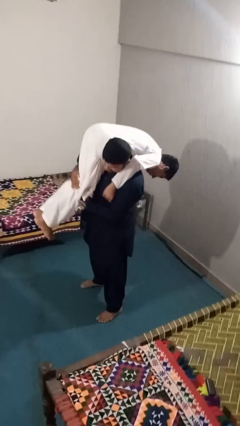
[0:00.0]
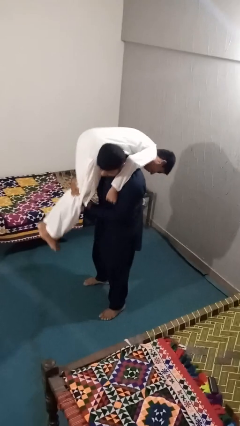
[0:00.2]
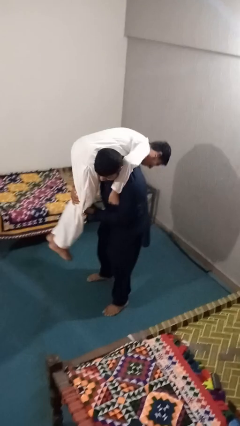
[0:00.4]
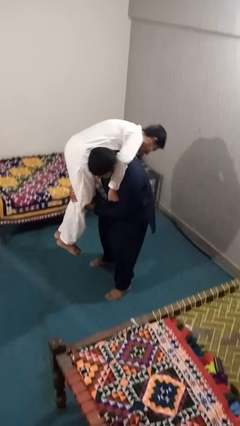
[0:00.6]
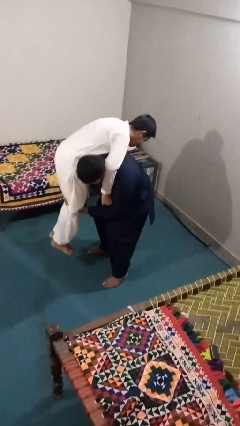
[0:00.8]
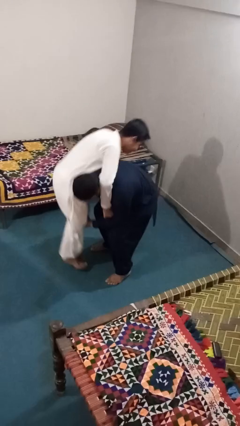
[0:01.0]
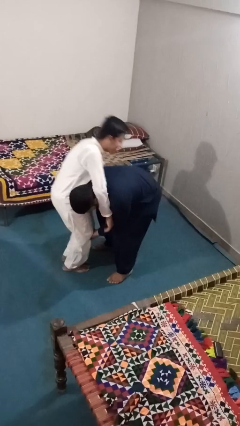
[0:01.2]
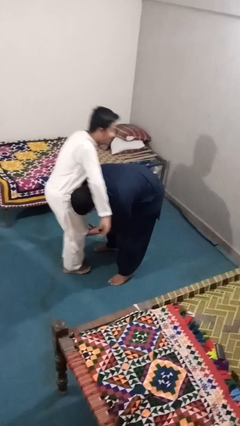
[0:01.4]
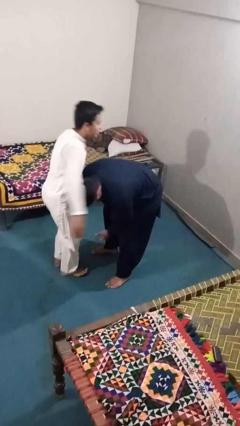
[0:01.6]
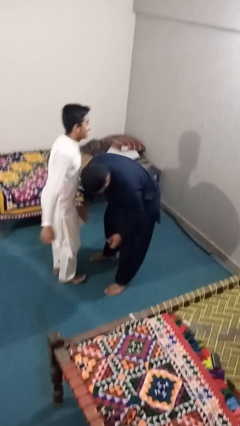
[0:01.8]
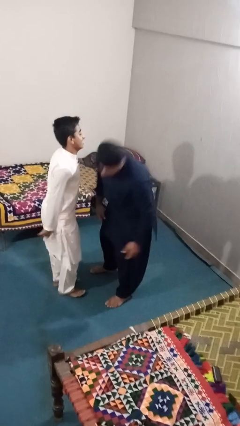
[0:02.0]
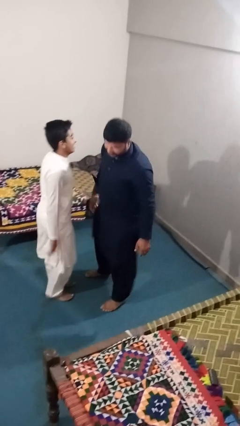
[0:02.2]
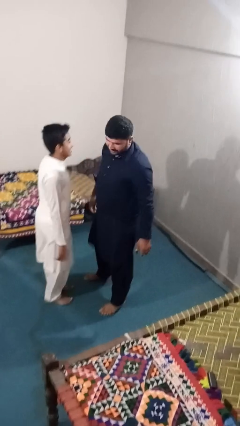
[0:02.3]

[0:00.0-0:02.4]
person puts down person

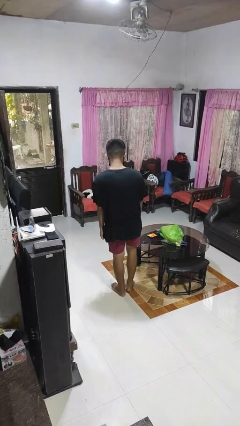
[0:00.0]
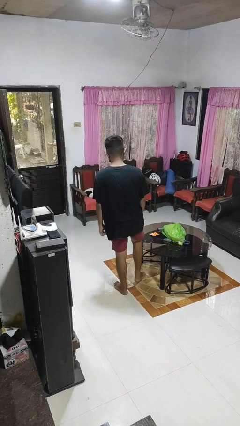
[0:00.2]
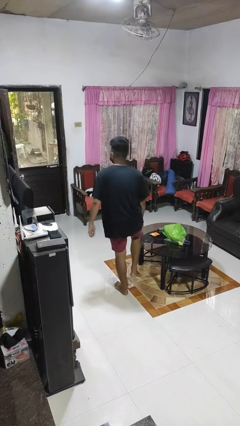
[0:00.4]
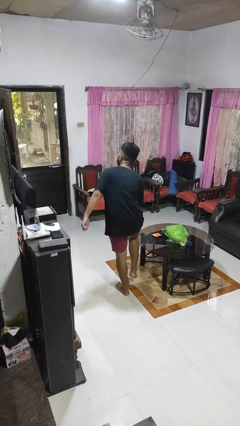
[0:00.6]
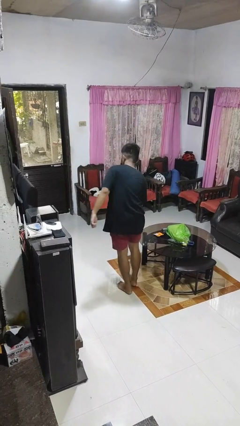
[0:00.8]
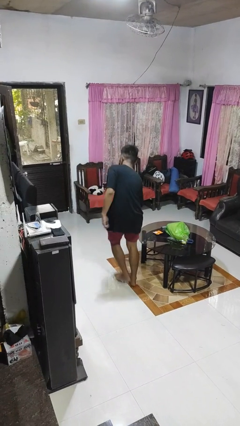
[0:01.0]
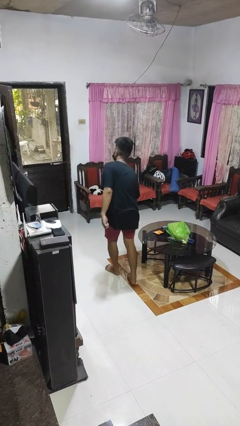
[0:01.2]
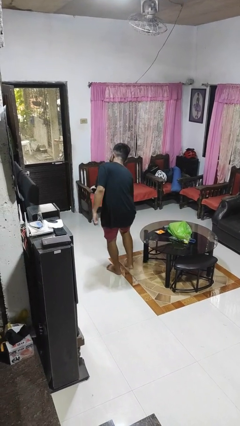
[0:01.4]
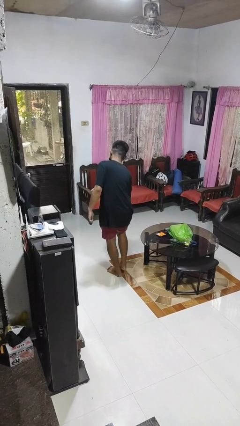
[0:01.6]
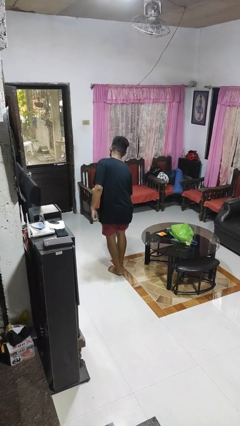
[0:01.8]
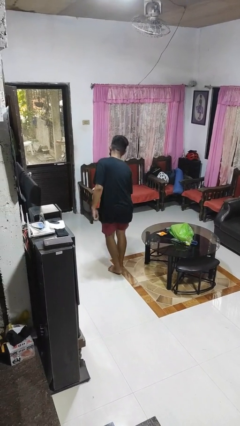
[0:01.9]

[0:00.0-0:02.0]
person bumps into table

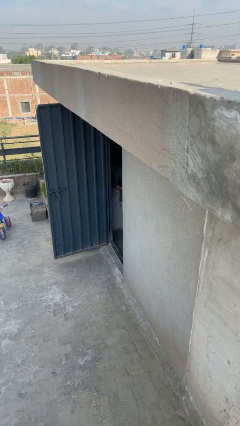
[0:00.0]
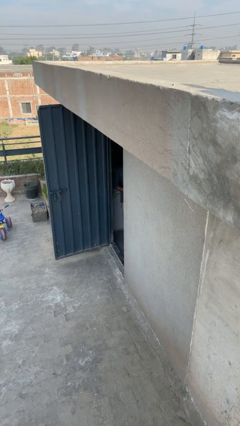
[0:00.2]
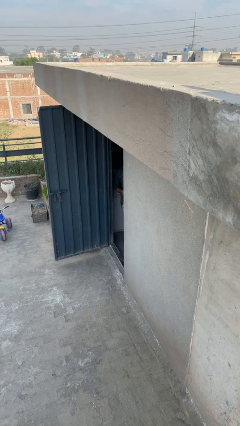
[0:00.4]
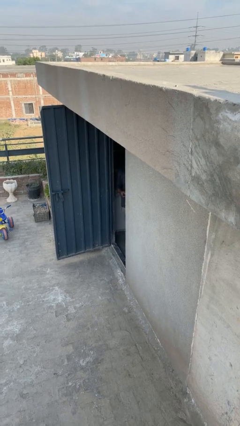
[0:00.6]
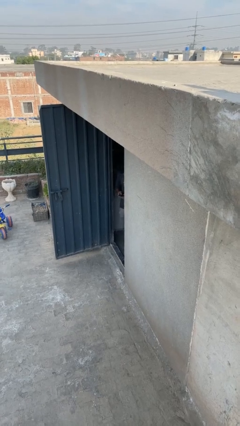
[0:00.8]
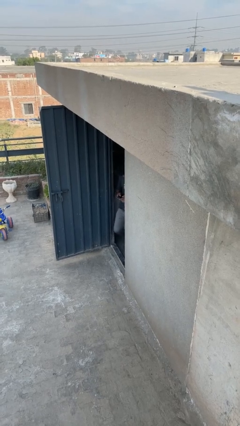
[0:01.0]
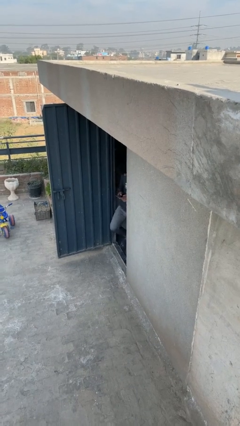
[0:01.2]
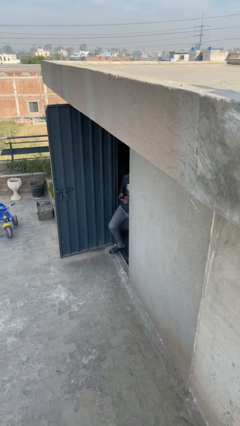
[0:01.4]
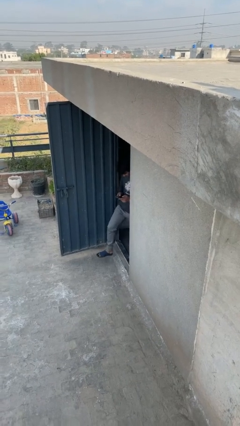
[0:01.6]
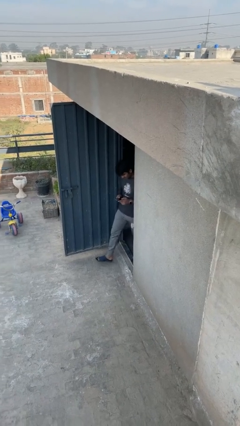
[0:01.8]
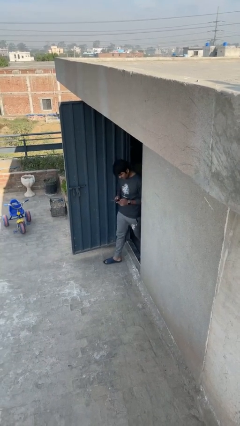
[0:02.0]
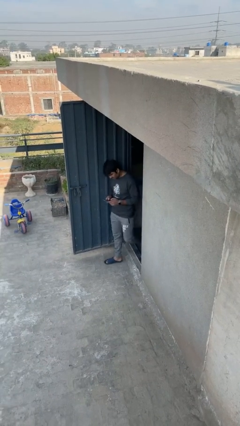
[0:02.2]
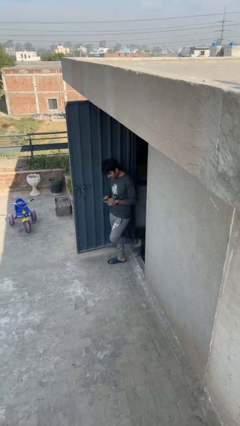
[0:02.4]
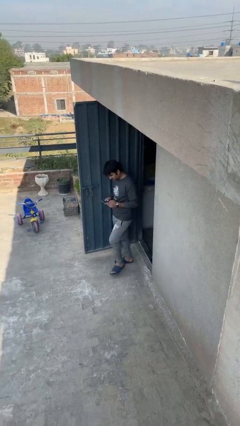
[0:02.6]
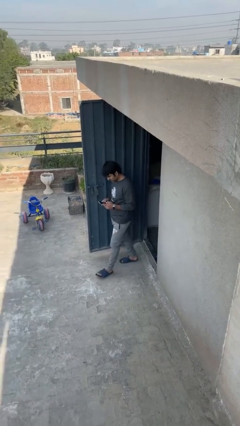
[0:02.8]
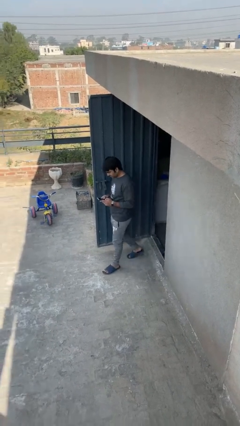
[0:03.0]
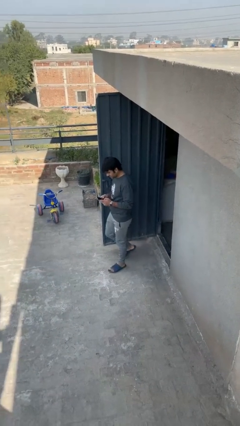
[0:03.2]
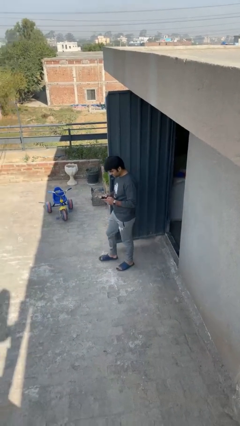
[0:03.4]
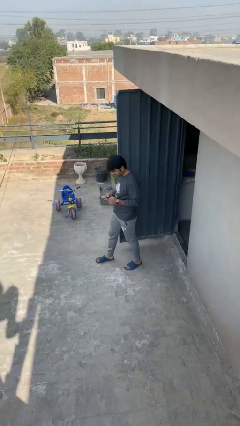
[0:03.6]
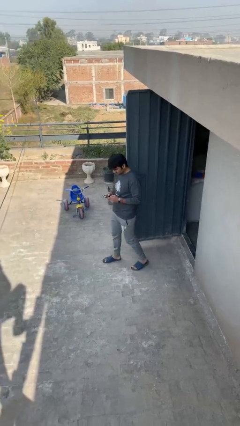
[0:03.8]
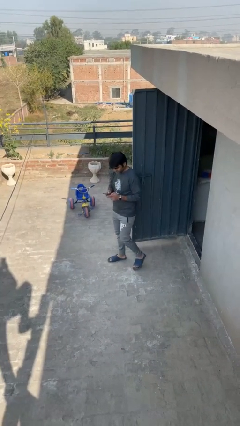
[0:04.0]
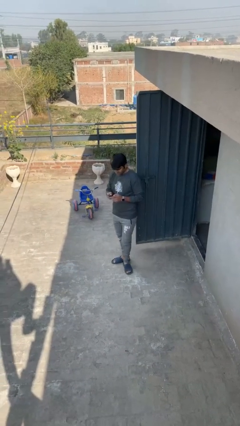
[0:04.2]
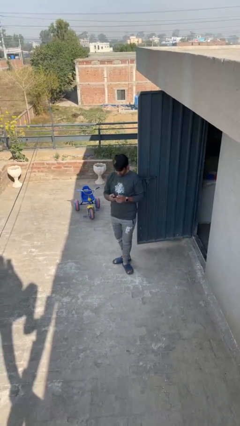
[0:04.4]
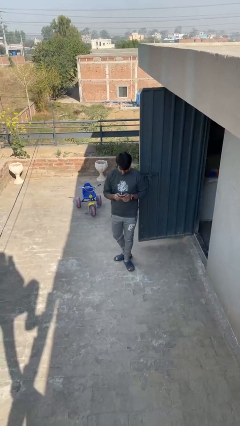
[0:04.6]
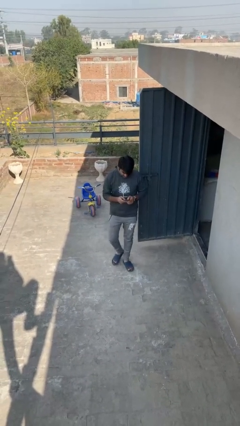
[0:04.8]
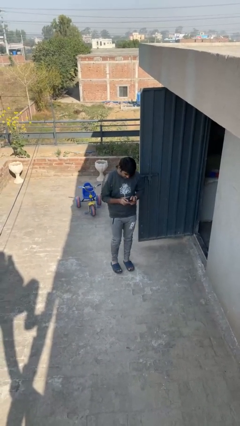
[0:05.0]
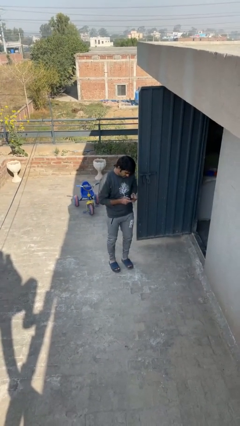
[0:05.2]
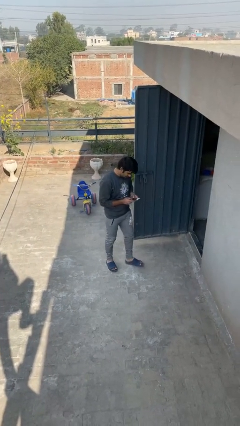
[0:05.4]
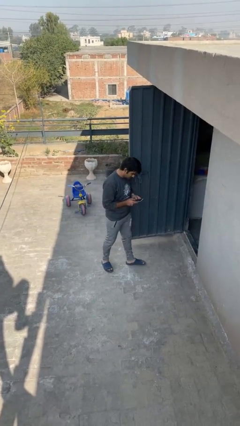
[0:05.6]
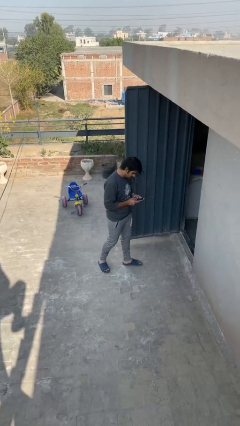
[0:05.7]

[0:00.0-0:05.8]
person enters scene through structure

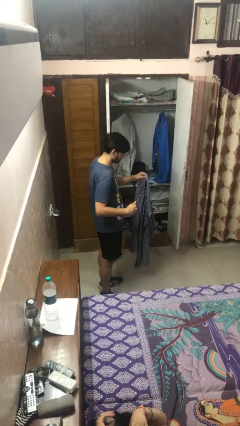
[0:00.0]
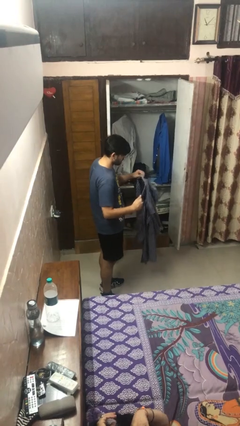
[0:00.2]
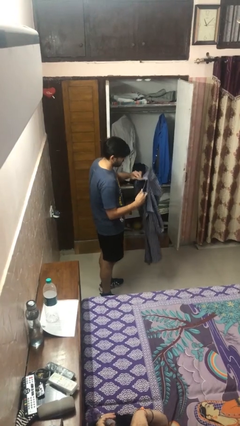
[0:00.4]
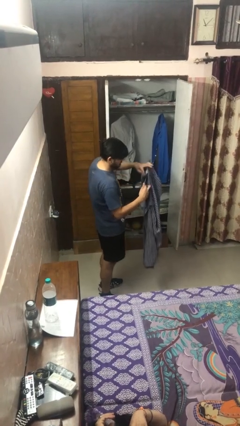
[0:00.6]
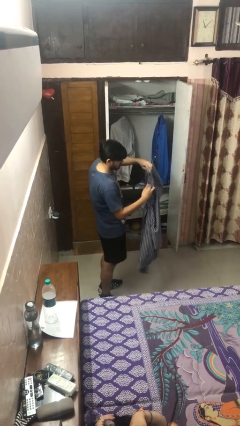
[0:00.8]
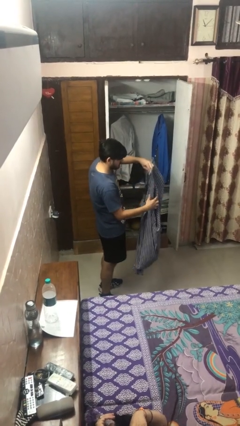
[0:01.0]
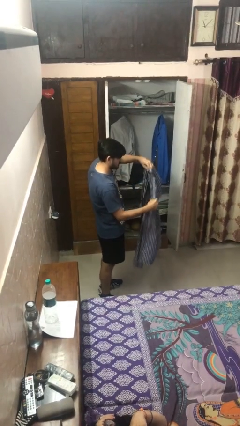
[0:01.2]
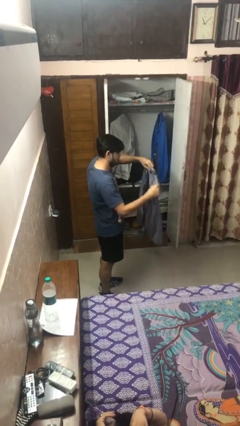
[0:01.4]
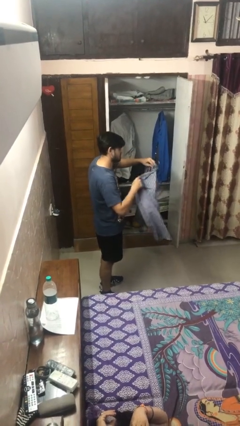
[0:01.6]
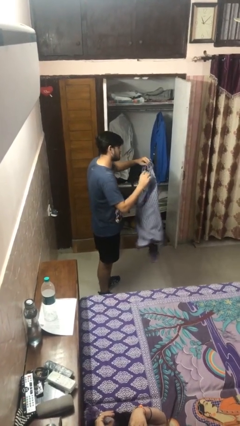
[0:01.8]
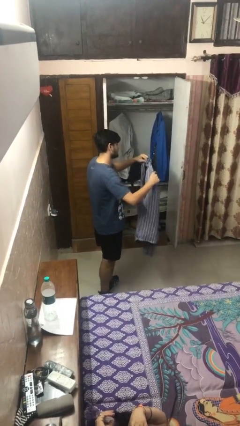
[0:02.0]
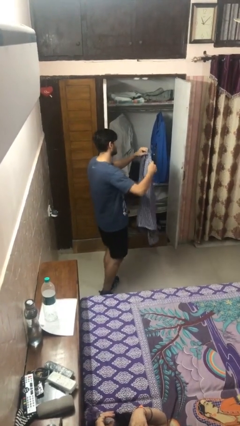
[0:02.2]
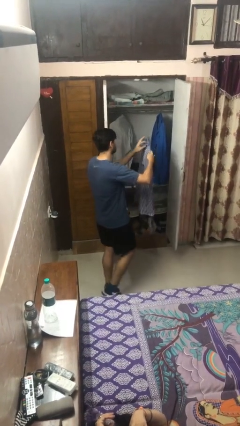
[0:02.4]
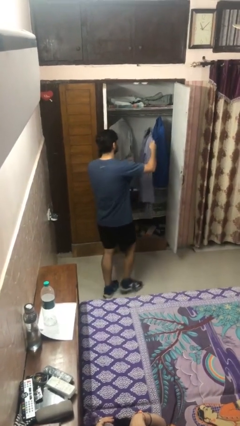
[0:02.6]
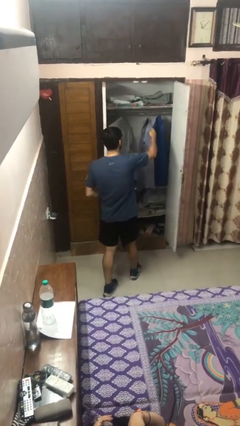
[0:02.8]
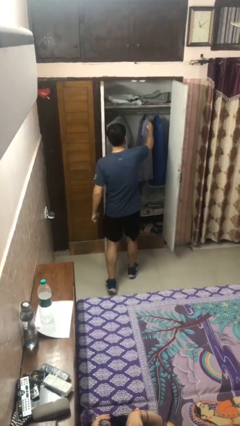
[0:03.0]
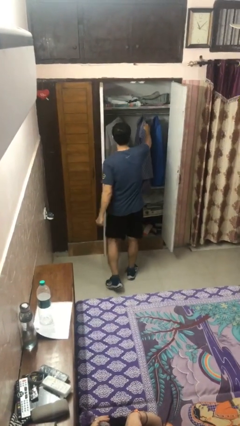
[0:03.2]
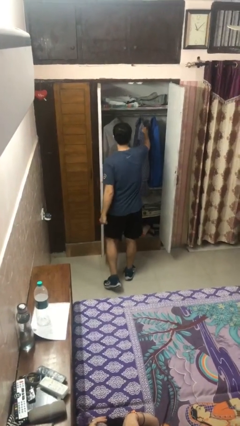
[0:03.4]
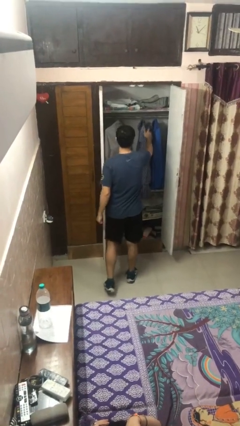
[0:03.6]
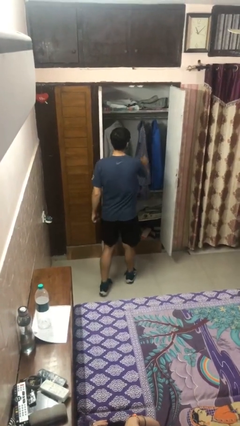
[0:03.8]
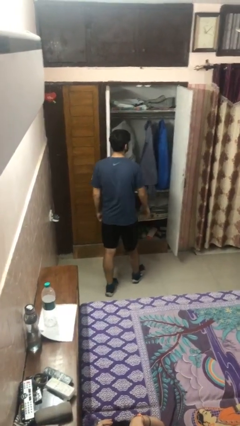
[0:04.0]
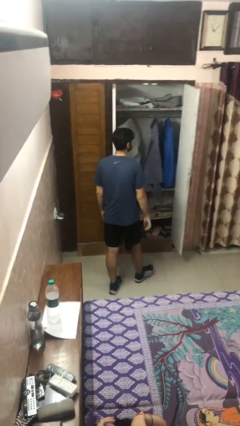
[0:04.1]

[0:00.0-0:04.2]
person puts clothes into closet

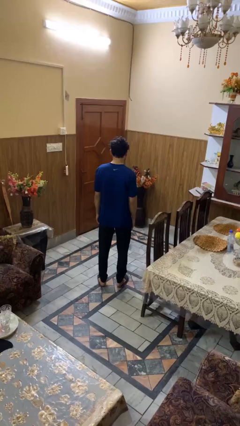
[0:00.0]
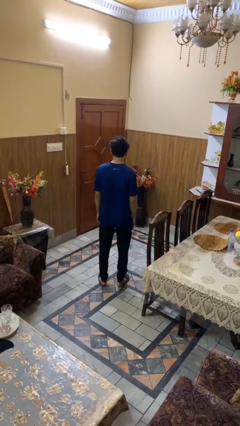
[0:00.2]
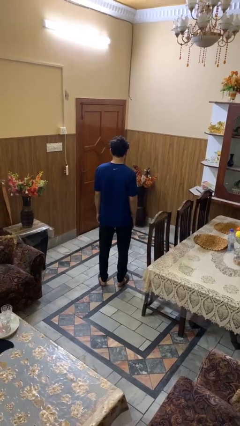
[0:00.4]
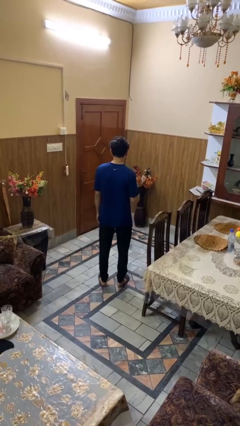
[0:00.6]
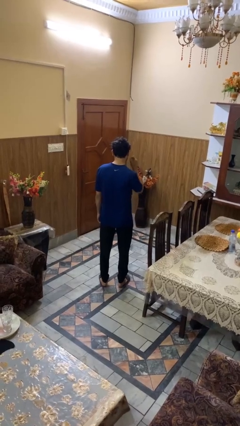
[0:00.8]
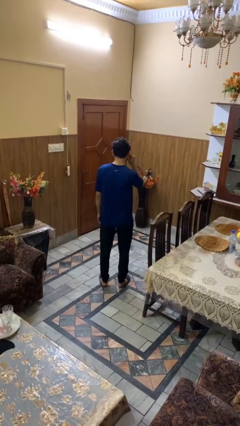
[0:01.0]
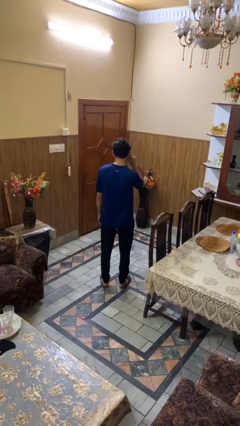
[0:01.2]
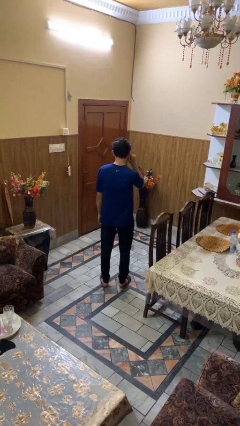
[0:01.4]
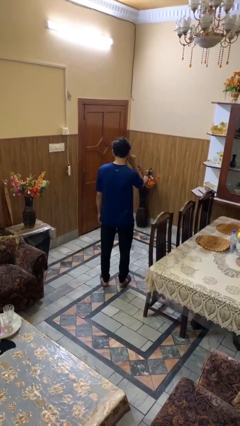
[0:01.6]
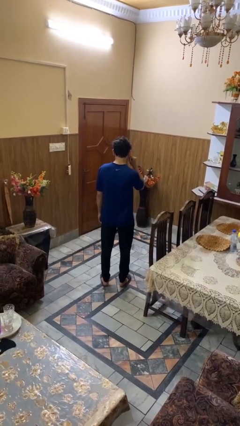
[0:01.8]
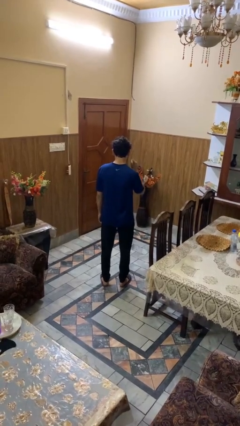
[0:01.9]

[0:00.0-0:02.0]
person touches earlobe

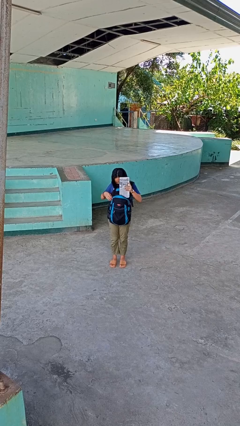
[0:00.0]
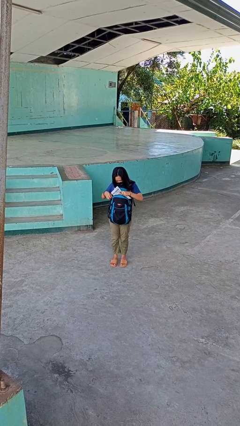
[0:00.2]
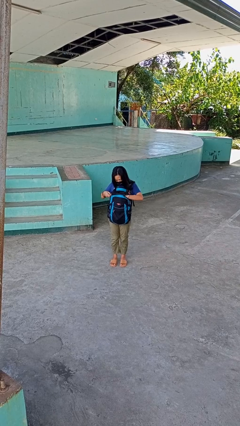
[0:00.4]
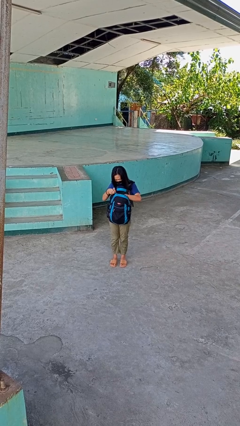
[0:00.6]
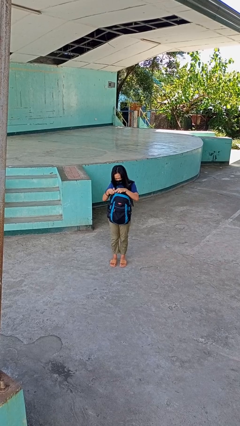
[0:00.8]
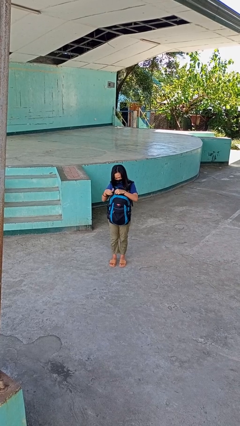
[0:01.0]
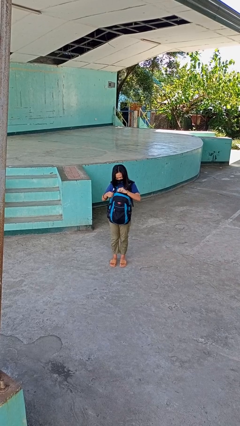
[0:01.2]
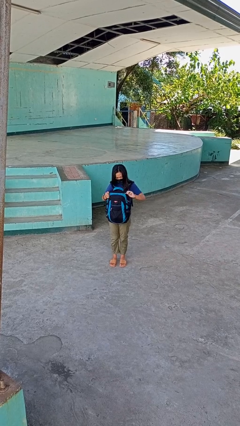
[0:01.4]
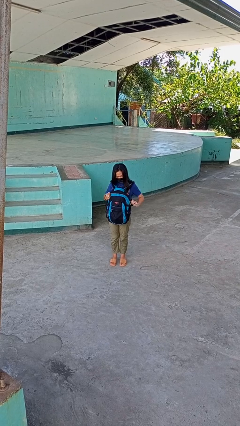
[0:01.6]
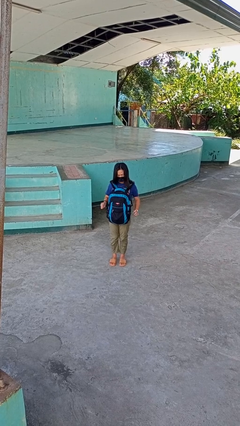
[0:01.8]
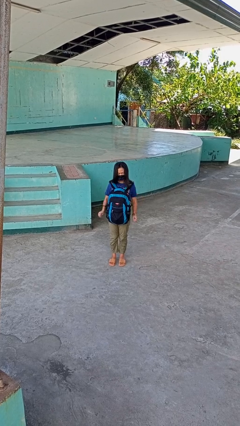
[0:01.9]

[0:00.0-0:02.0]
person puts object into backpack
